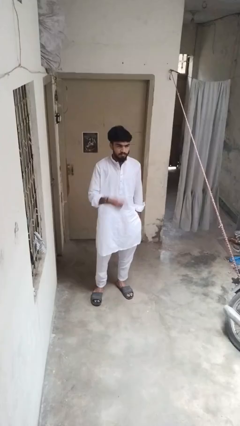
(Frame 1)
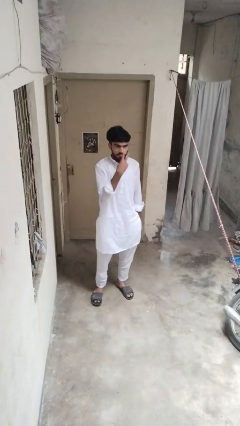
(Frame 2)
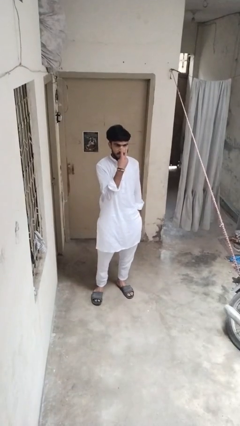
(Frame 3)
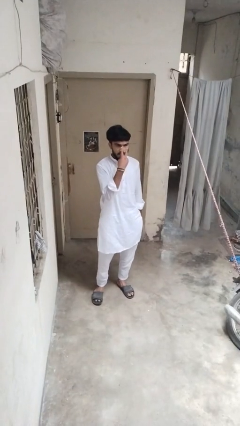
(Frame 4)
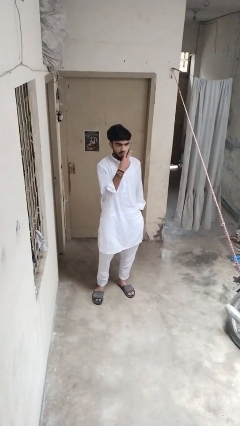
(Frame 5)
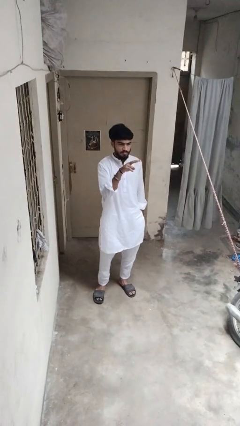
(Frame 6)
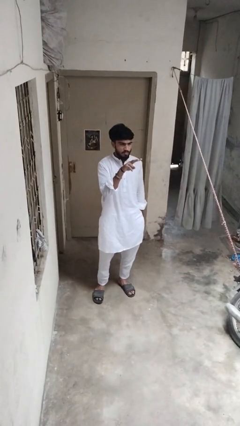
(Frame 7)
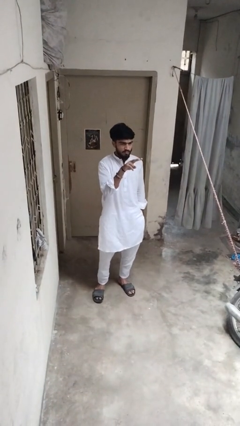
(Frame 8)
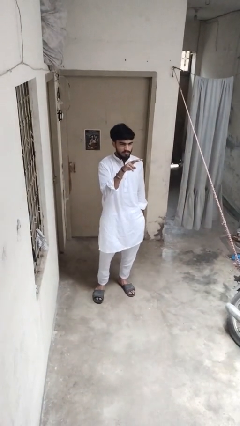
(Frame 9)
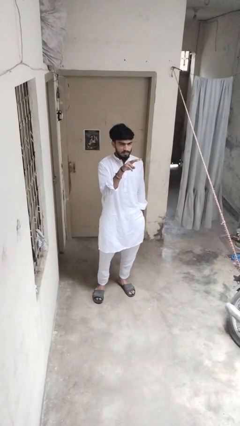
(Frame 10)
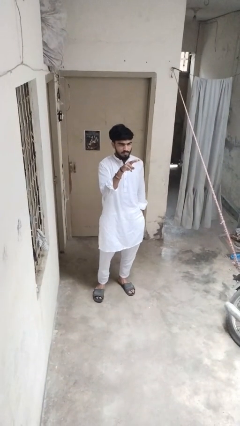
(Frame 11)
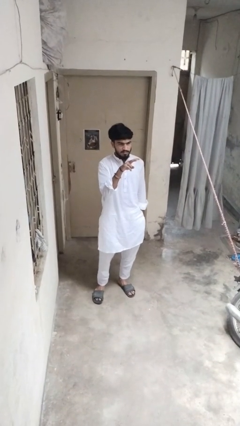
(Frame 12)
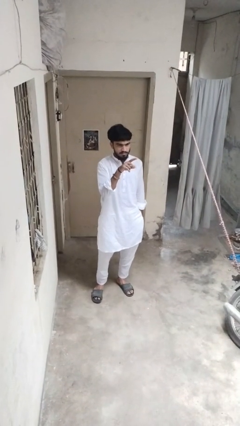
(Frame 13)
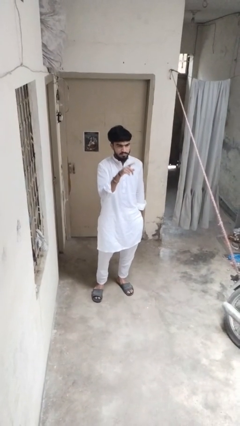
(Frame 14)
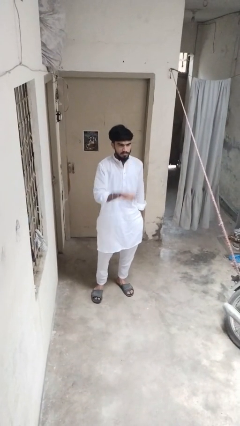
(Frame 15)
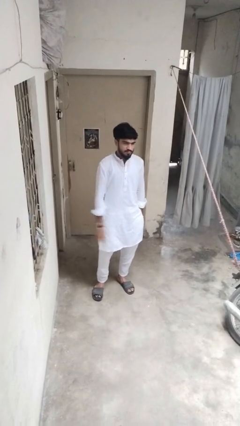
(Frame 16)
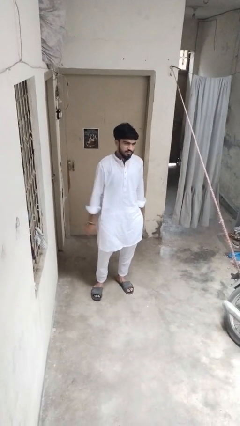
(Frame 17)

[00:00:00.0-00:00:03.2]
person gestures watch closely

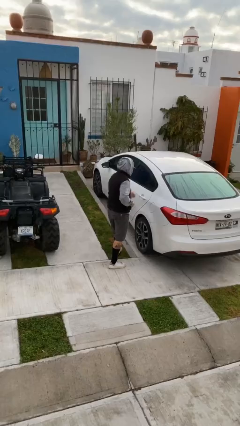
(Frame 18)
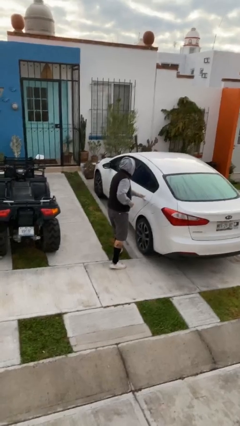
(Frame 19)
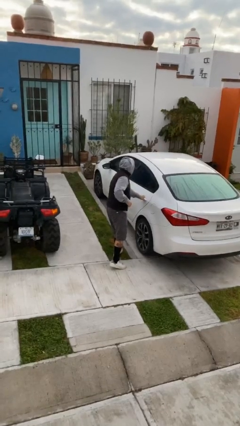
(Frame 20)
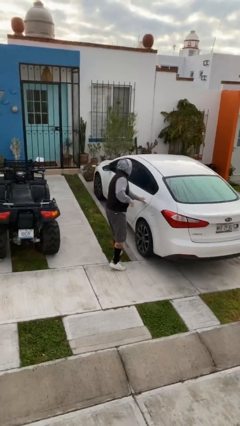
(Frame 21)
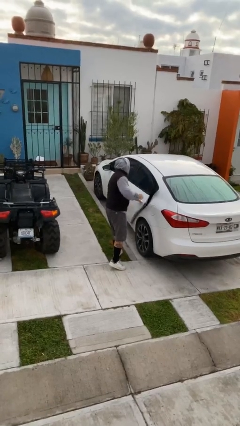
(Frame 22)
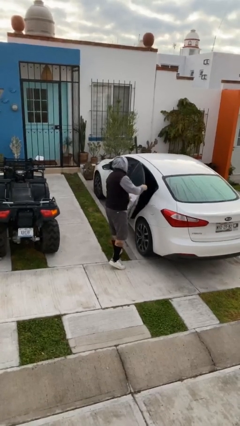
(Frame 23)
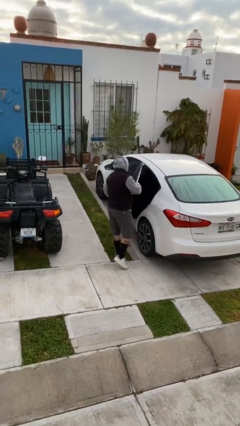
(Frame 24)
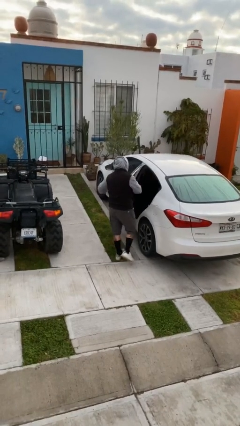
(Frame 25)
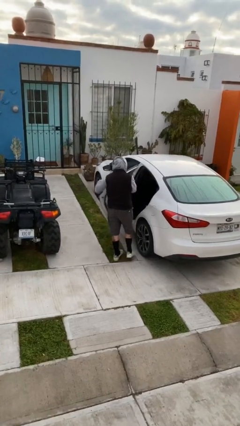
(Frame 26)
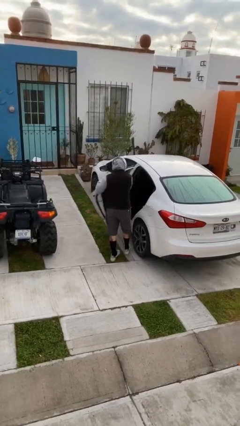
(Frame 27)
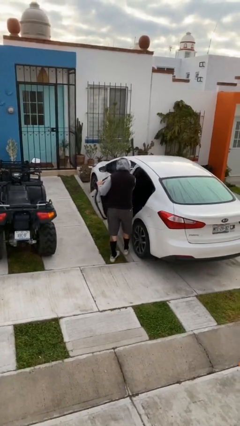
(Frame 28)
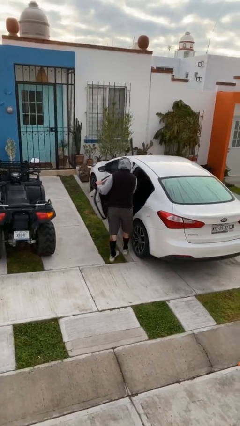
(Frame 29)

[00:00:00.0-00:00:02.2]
person opens car door

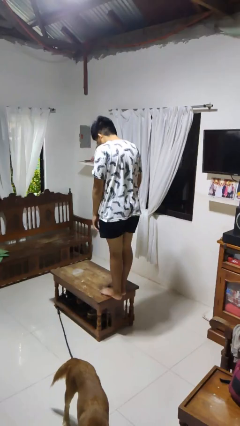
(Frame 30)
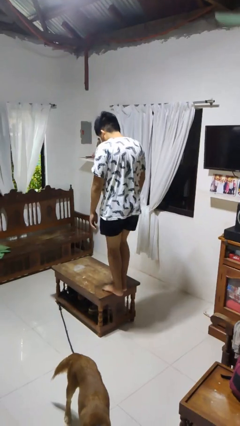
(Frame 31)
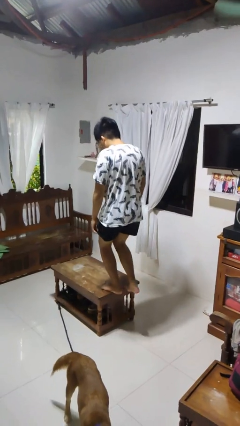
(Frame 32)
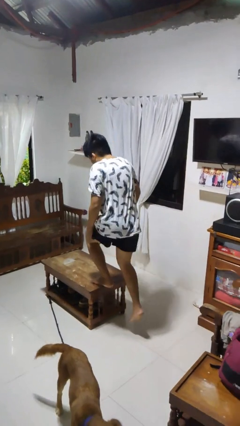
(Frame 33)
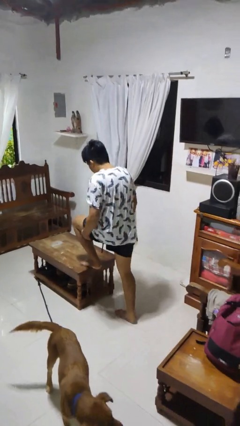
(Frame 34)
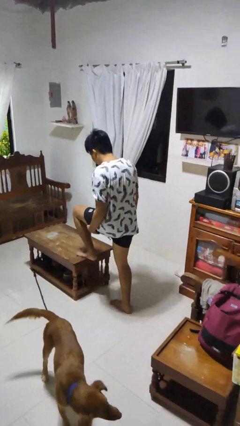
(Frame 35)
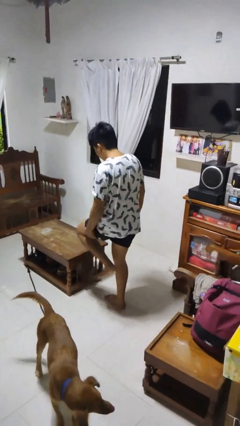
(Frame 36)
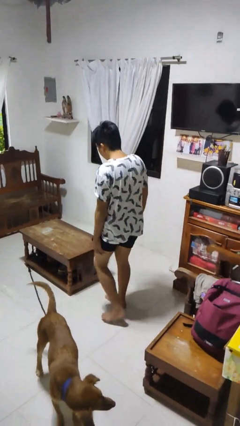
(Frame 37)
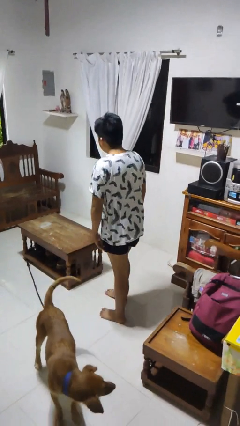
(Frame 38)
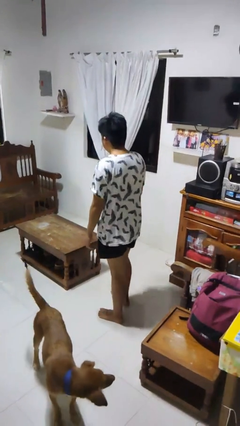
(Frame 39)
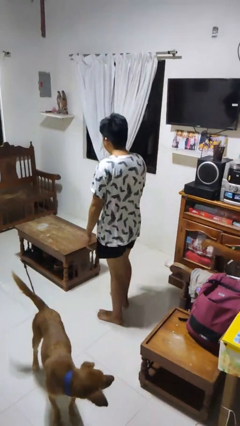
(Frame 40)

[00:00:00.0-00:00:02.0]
person climbs off table

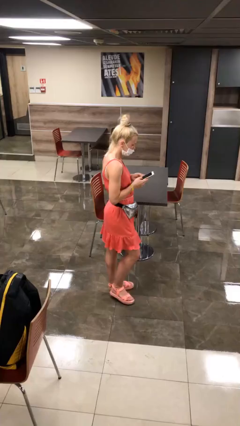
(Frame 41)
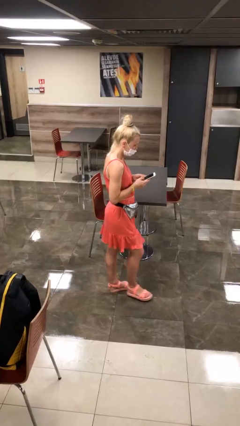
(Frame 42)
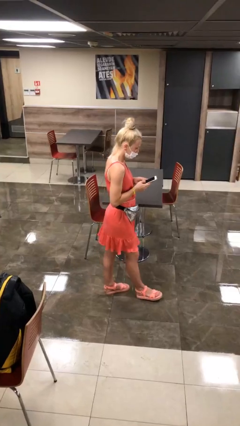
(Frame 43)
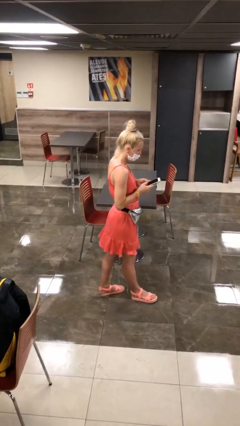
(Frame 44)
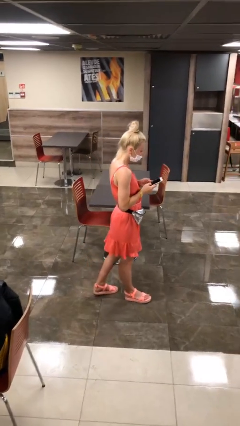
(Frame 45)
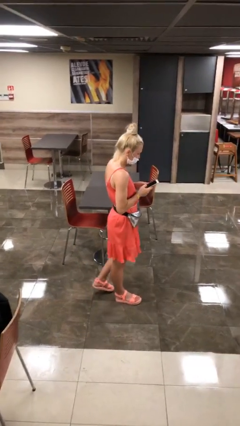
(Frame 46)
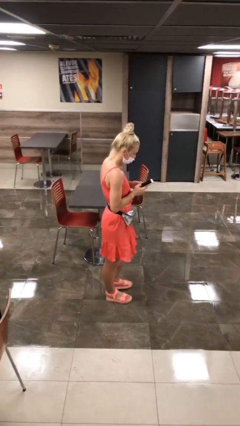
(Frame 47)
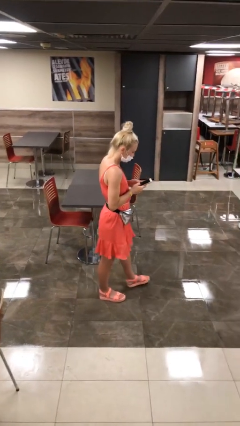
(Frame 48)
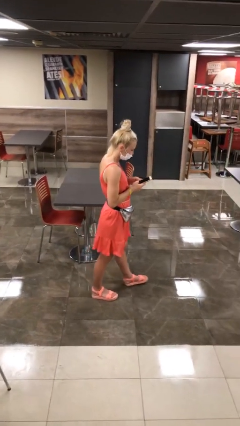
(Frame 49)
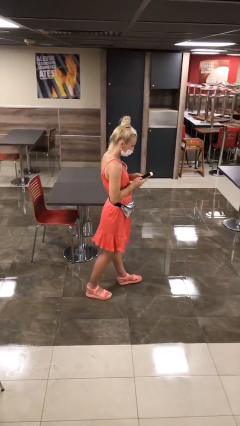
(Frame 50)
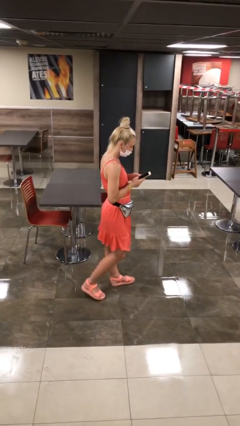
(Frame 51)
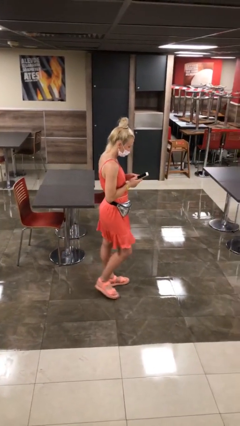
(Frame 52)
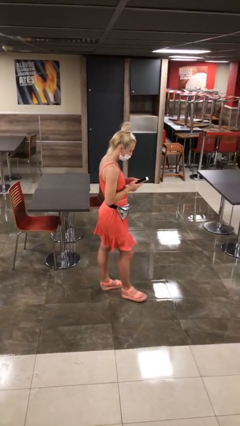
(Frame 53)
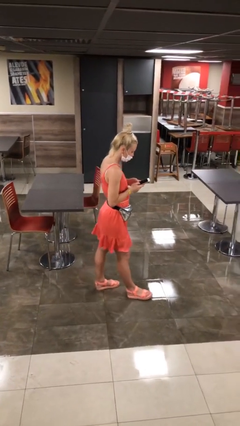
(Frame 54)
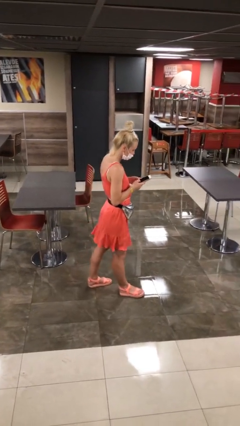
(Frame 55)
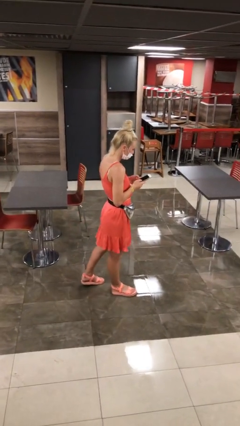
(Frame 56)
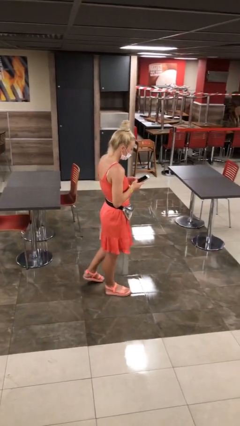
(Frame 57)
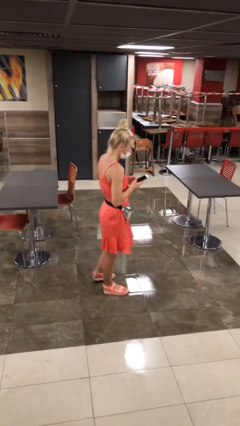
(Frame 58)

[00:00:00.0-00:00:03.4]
person texts on phone

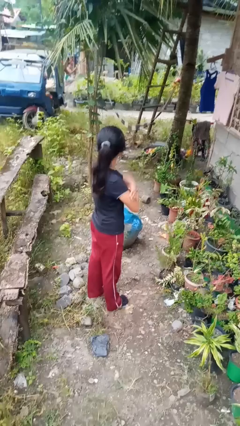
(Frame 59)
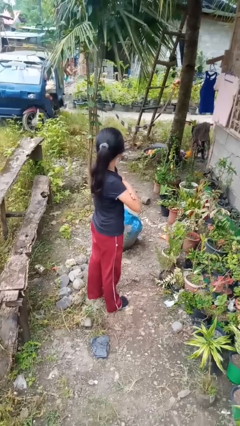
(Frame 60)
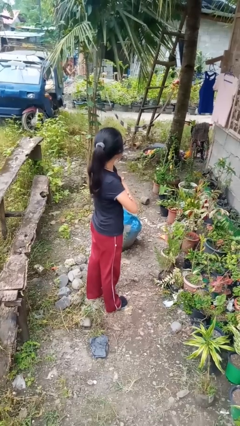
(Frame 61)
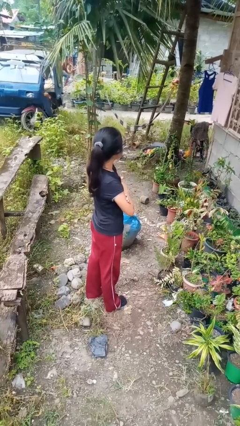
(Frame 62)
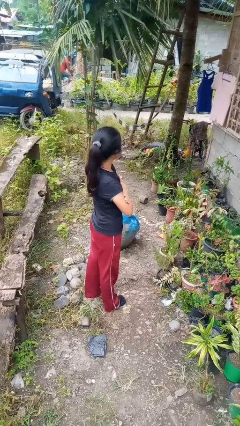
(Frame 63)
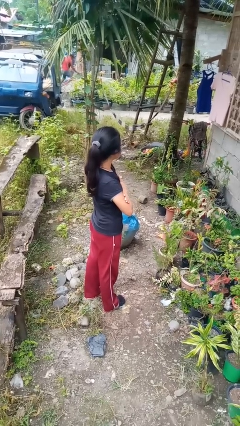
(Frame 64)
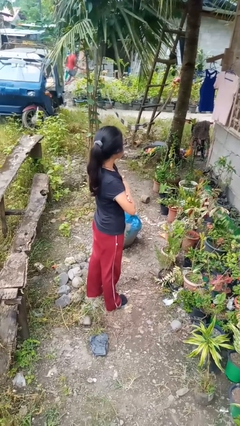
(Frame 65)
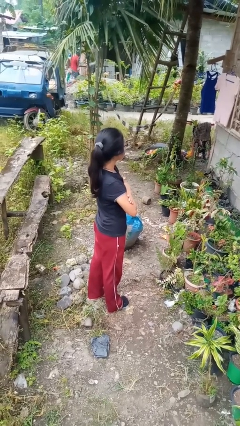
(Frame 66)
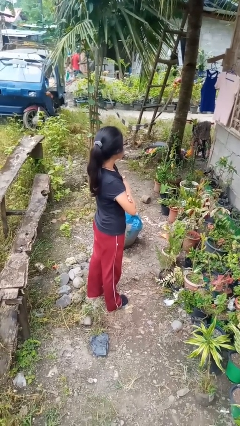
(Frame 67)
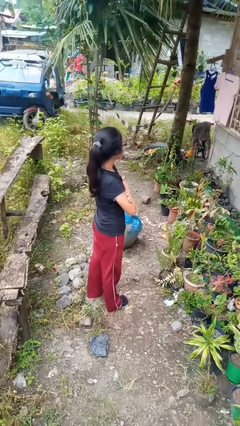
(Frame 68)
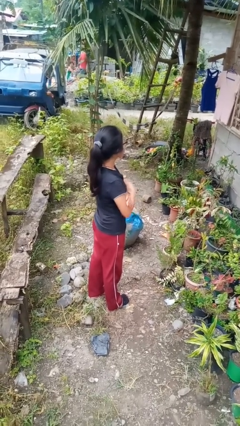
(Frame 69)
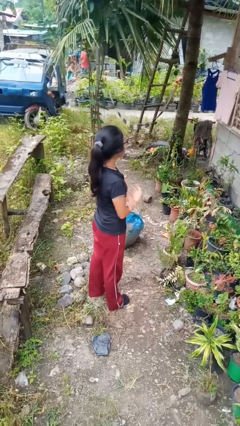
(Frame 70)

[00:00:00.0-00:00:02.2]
person crosses arms

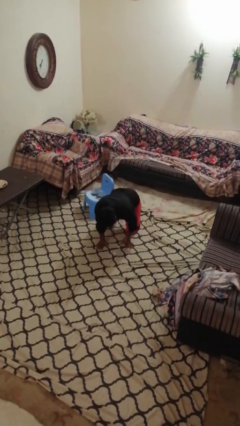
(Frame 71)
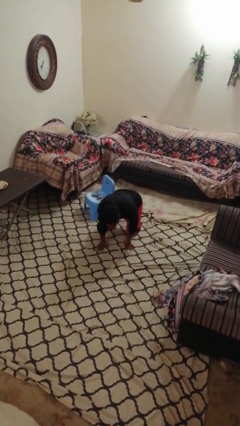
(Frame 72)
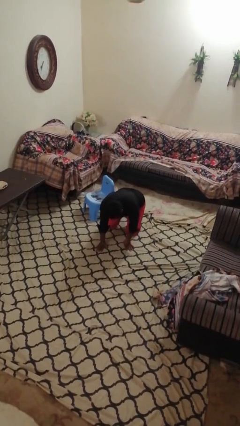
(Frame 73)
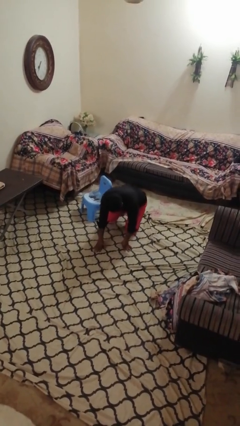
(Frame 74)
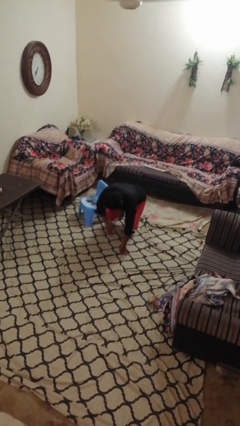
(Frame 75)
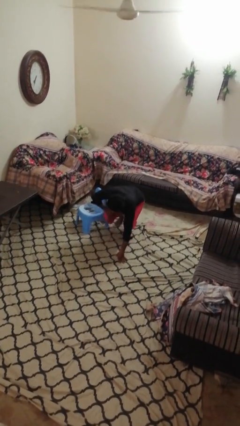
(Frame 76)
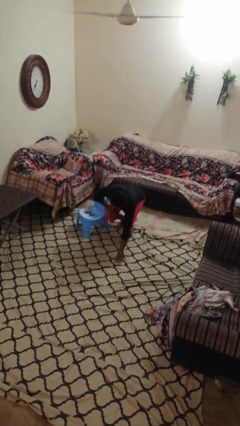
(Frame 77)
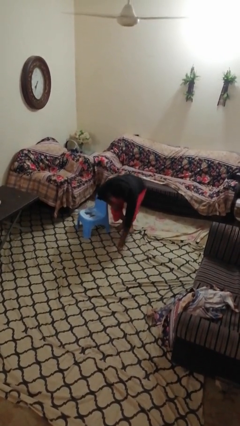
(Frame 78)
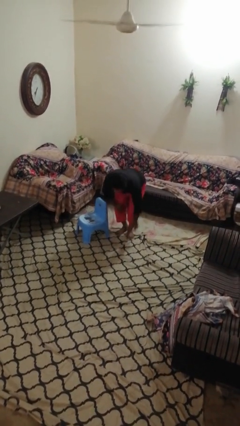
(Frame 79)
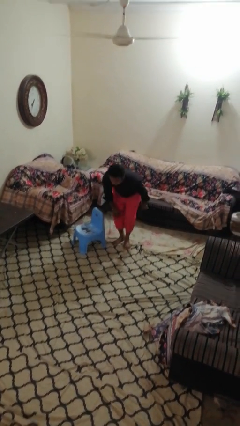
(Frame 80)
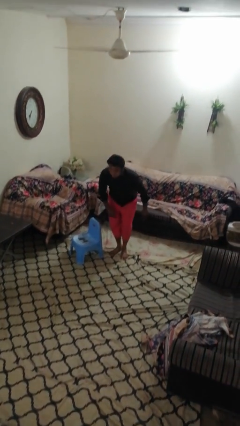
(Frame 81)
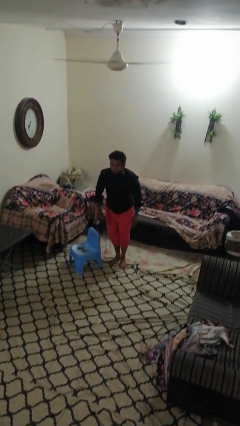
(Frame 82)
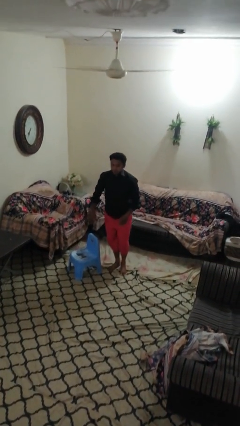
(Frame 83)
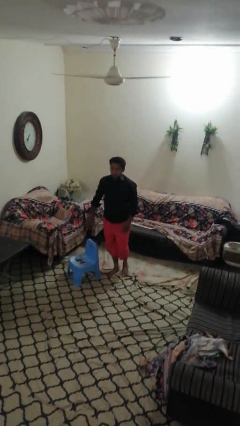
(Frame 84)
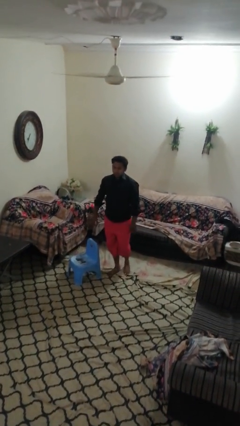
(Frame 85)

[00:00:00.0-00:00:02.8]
person stands up from floor

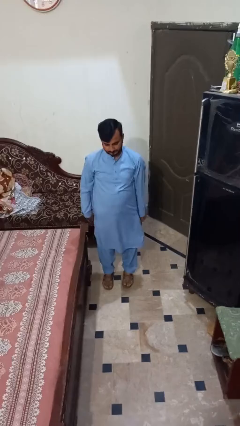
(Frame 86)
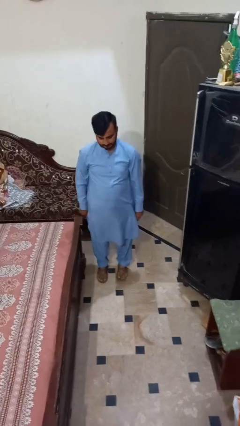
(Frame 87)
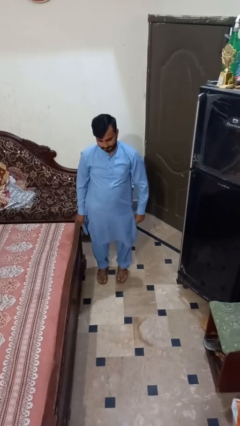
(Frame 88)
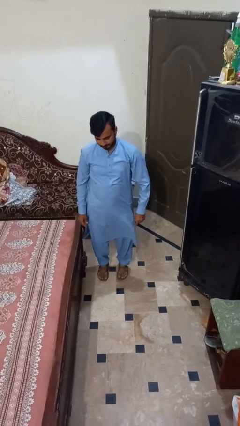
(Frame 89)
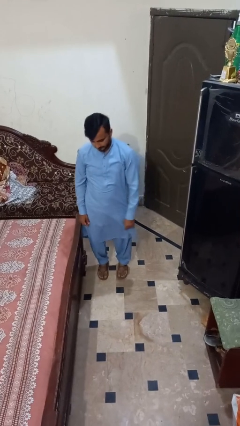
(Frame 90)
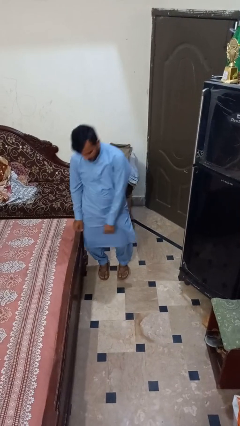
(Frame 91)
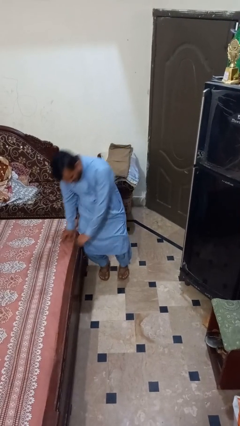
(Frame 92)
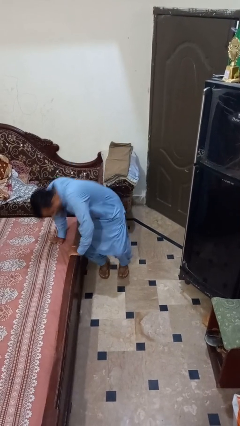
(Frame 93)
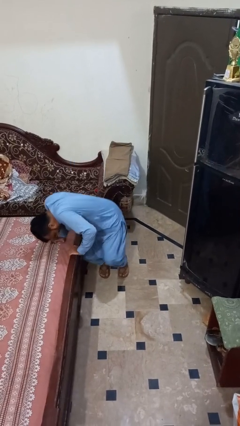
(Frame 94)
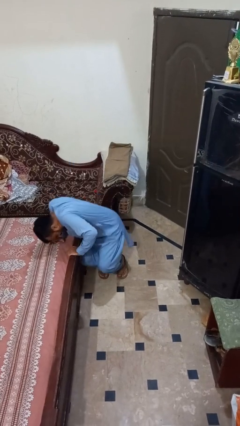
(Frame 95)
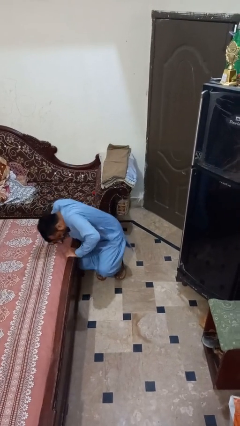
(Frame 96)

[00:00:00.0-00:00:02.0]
person trips on object on floor
